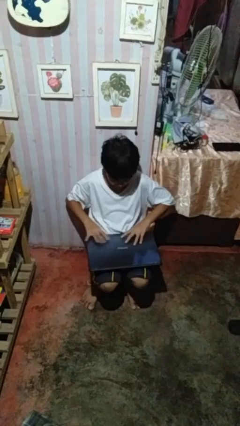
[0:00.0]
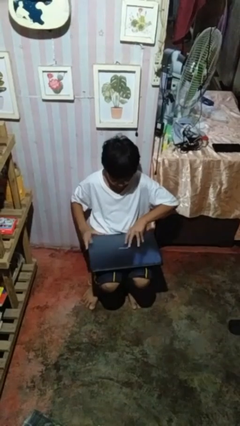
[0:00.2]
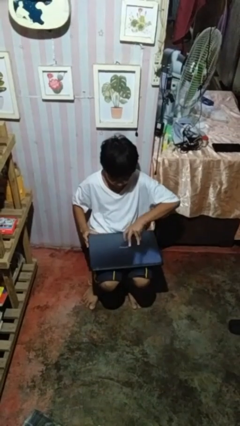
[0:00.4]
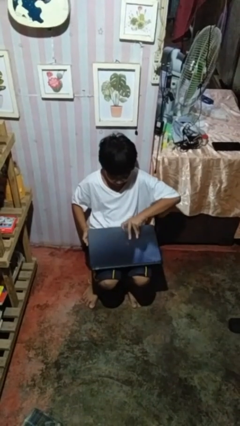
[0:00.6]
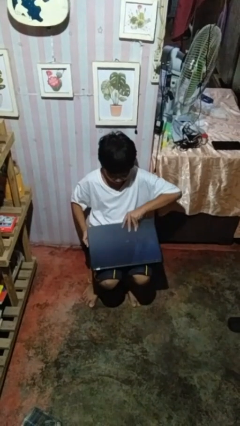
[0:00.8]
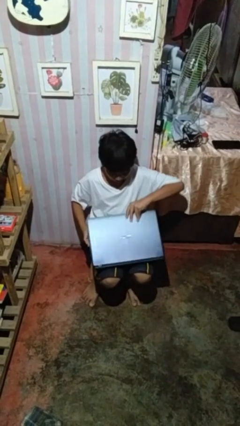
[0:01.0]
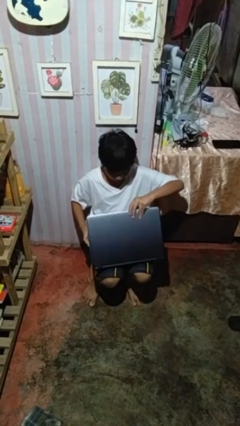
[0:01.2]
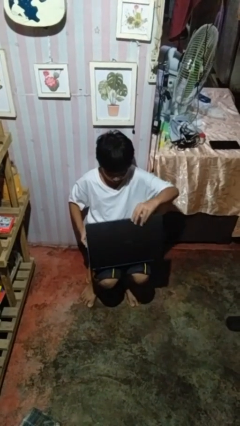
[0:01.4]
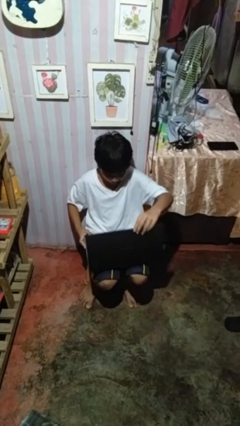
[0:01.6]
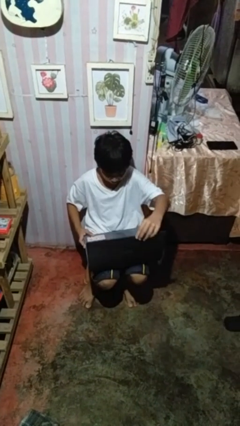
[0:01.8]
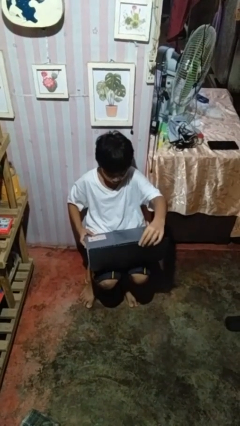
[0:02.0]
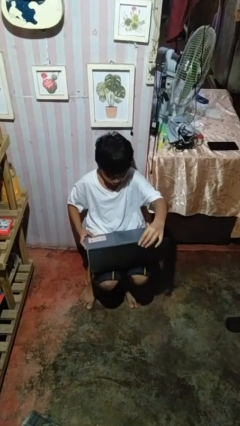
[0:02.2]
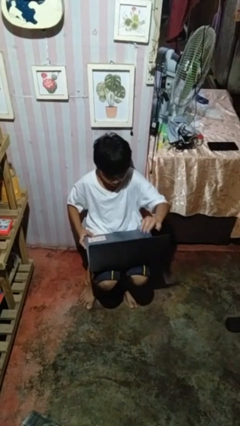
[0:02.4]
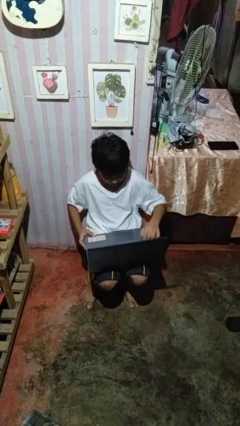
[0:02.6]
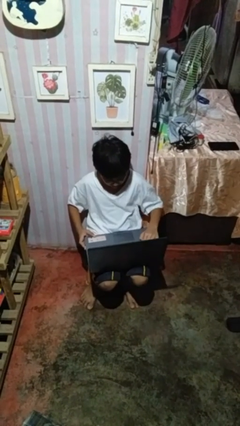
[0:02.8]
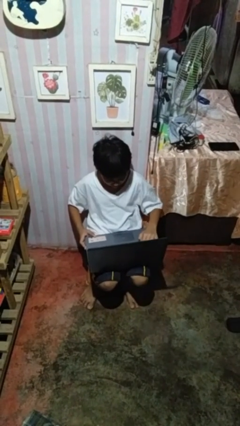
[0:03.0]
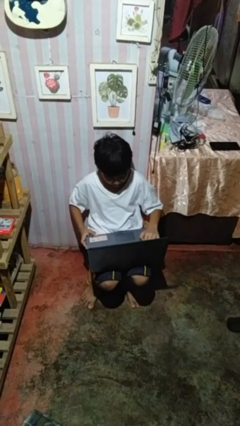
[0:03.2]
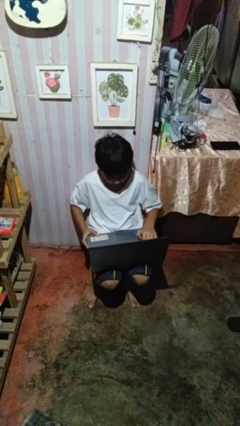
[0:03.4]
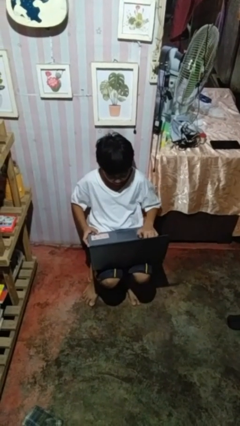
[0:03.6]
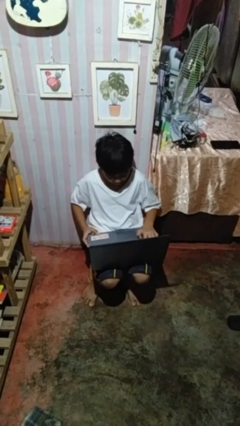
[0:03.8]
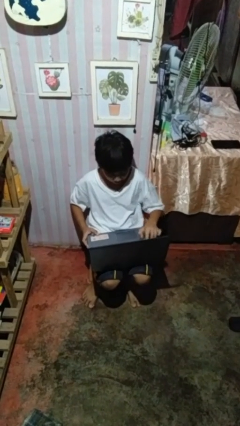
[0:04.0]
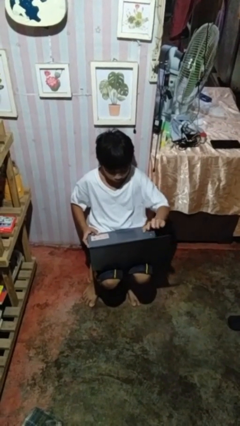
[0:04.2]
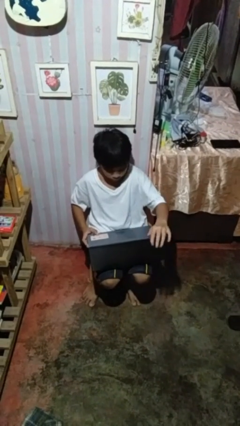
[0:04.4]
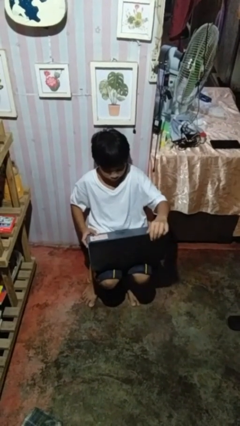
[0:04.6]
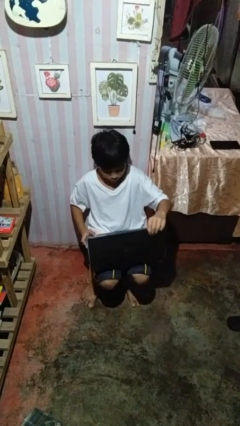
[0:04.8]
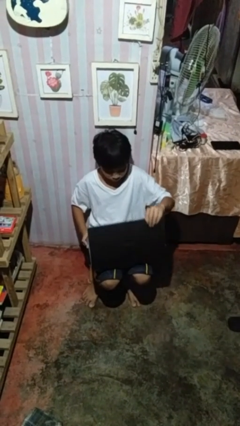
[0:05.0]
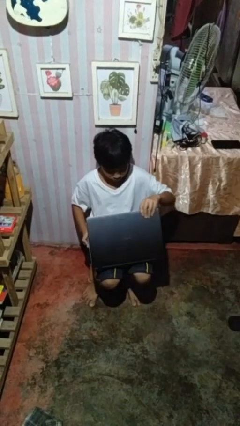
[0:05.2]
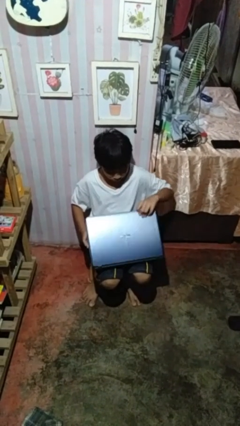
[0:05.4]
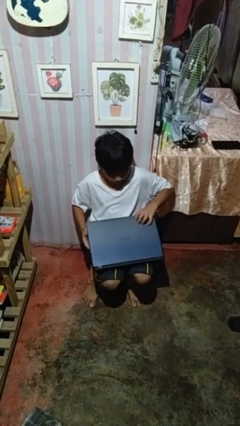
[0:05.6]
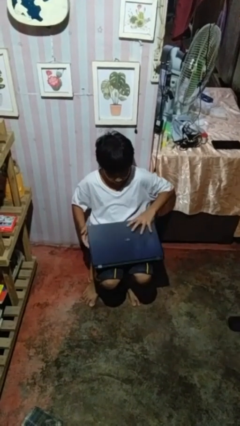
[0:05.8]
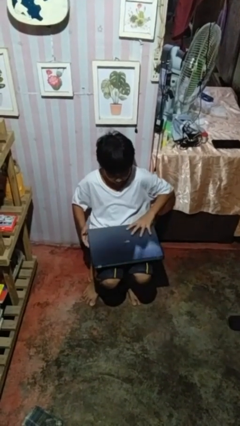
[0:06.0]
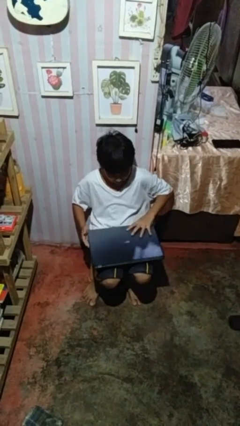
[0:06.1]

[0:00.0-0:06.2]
person interacts with laptop

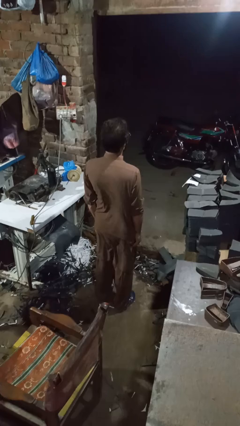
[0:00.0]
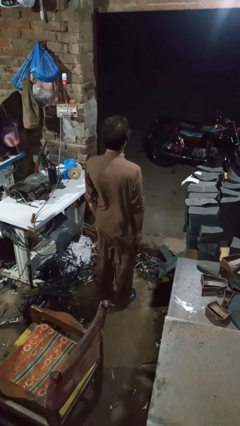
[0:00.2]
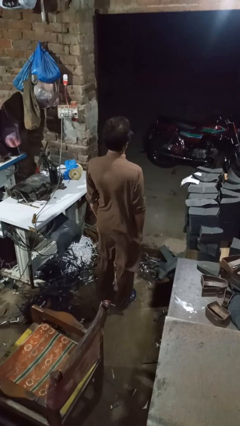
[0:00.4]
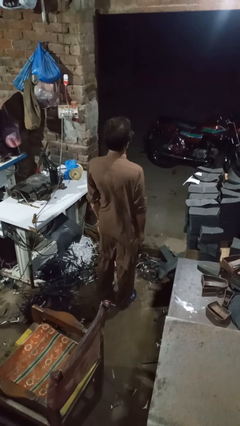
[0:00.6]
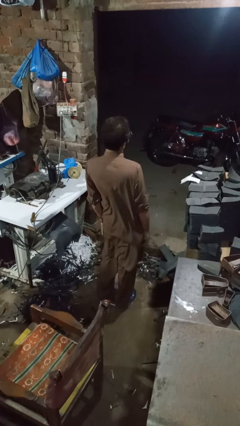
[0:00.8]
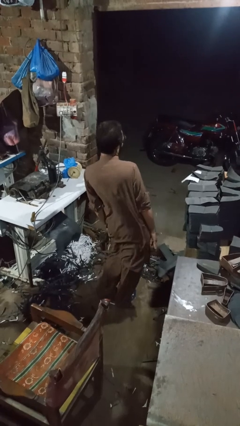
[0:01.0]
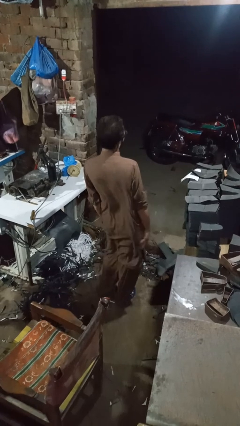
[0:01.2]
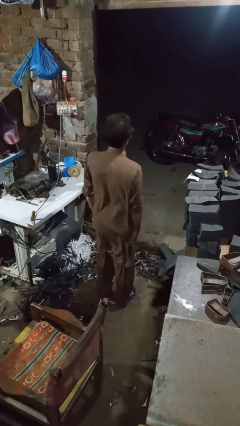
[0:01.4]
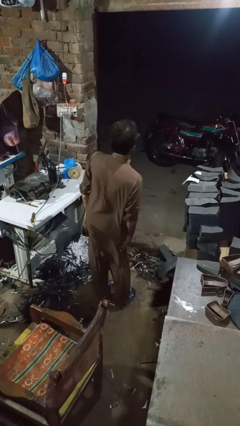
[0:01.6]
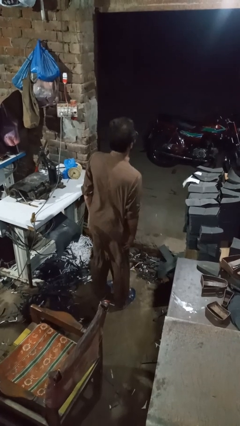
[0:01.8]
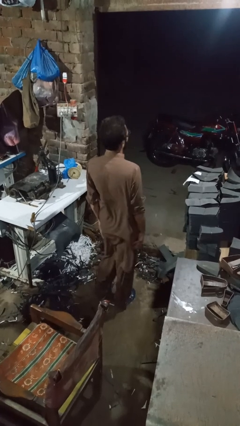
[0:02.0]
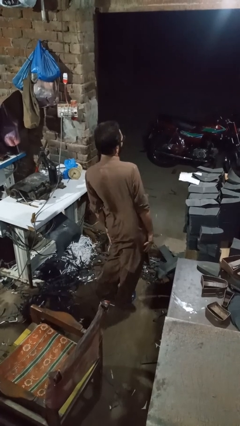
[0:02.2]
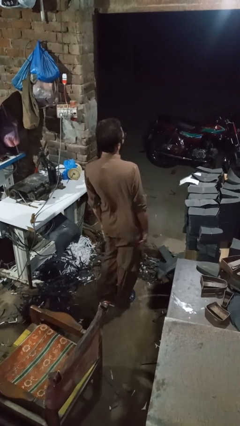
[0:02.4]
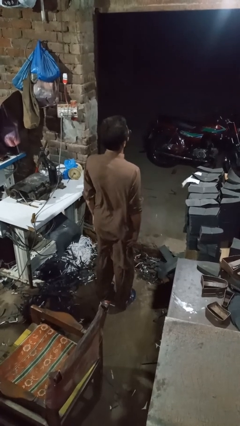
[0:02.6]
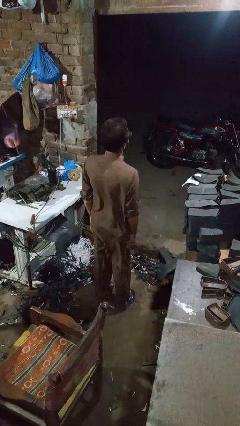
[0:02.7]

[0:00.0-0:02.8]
person wiggles hips

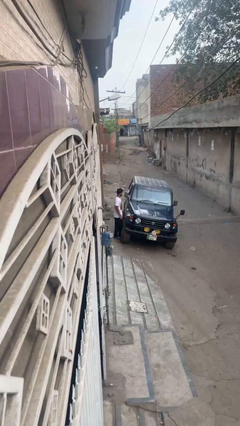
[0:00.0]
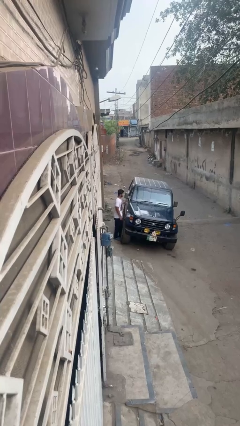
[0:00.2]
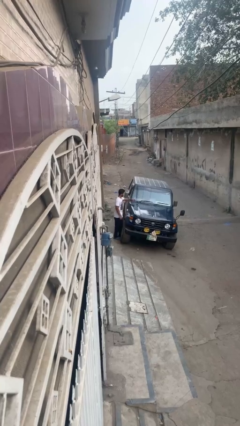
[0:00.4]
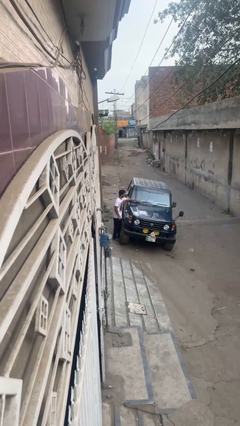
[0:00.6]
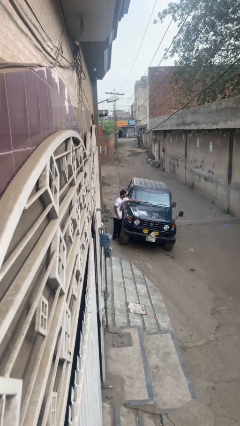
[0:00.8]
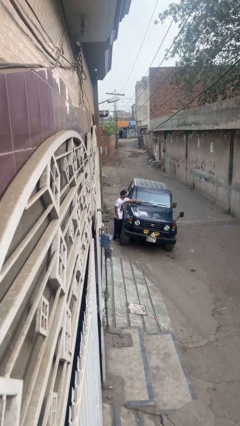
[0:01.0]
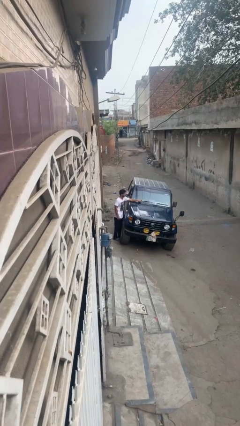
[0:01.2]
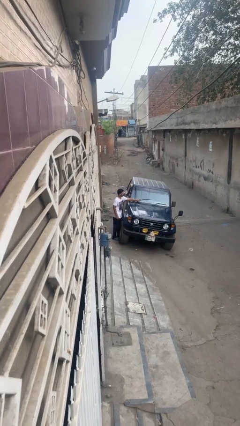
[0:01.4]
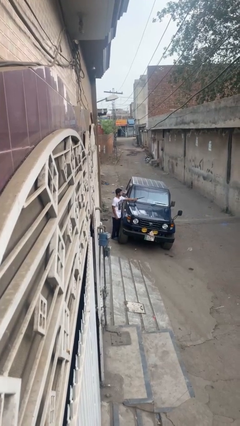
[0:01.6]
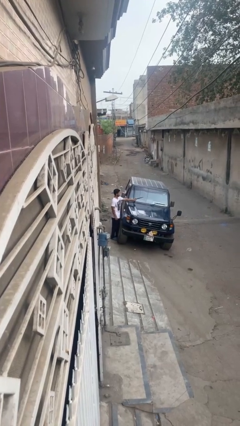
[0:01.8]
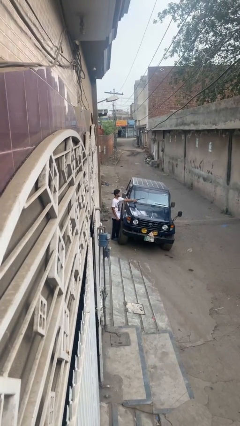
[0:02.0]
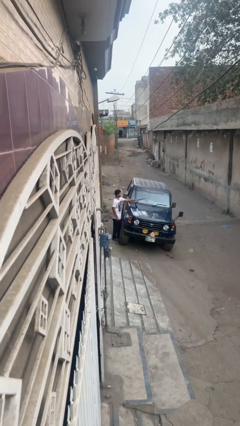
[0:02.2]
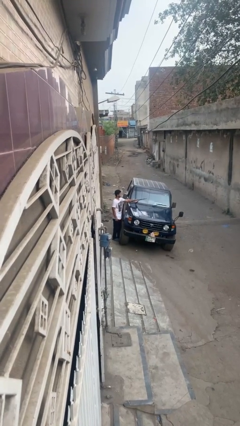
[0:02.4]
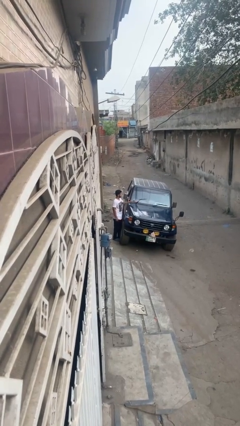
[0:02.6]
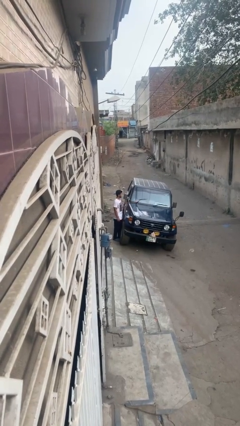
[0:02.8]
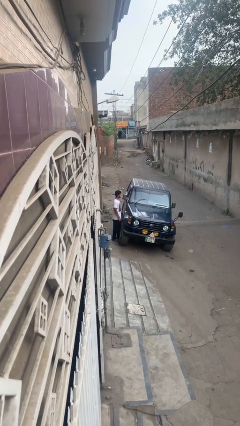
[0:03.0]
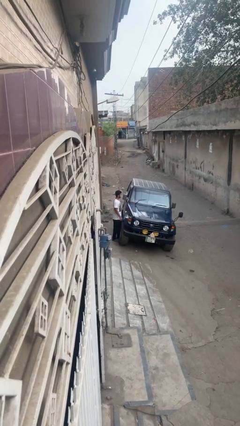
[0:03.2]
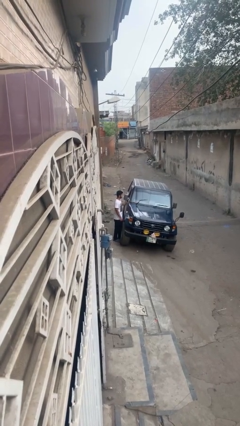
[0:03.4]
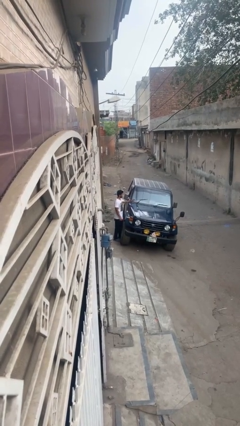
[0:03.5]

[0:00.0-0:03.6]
person flips up car wipers

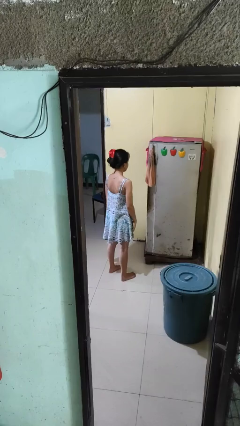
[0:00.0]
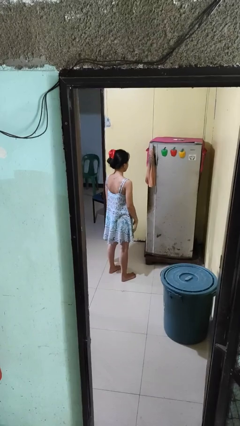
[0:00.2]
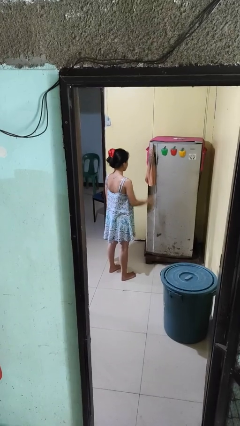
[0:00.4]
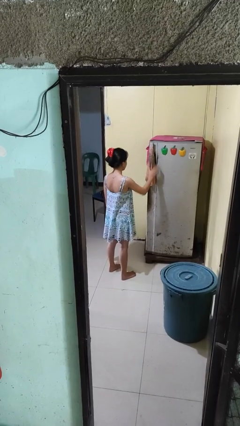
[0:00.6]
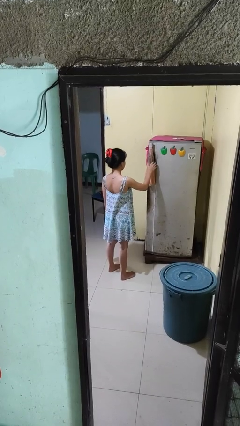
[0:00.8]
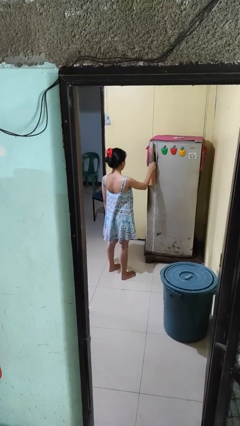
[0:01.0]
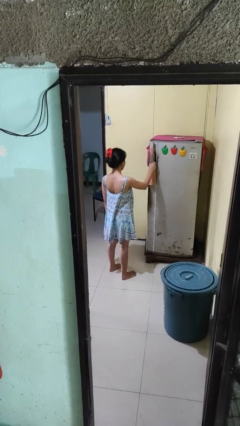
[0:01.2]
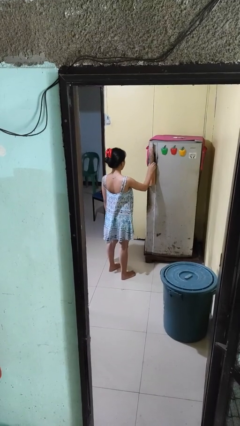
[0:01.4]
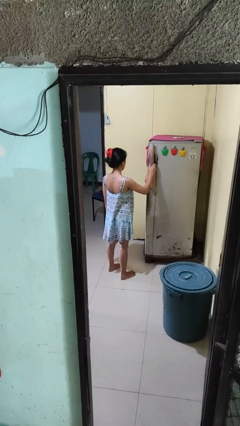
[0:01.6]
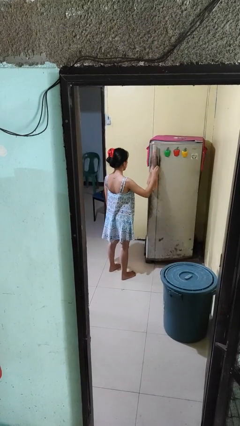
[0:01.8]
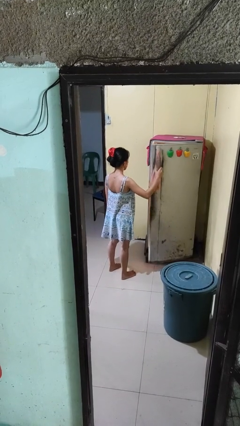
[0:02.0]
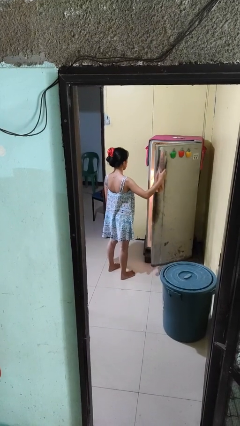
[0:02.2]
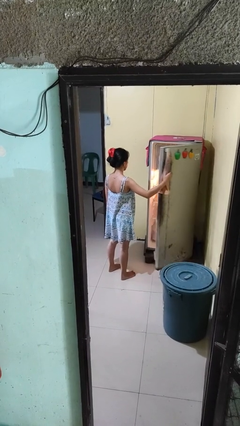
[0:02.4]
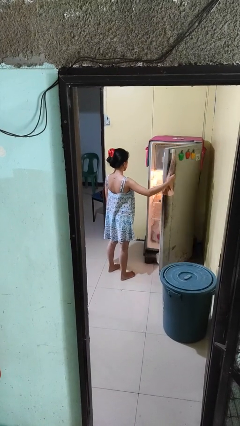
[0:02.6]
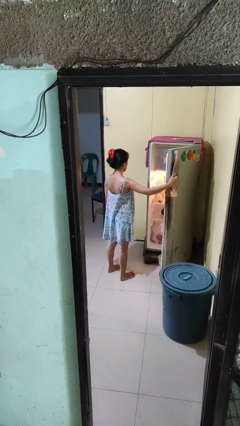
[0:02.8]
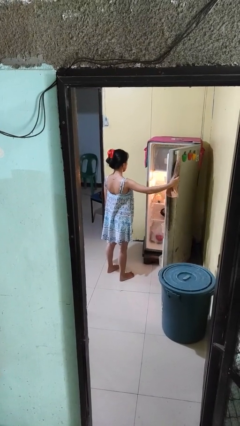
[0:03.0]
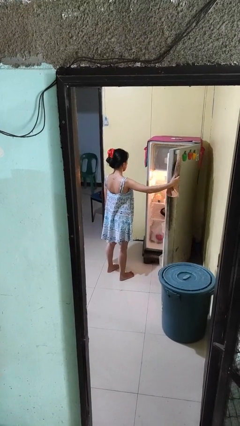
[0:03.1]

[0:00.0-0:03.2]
person opens refrigerator

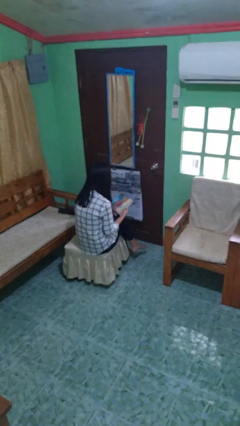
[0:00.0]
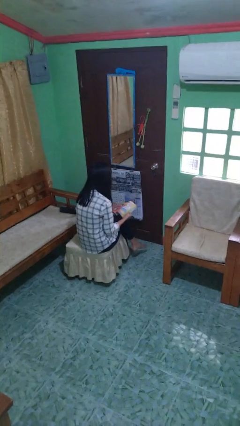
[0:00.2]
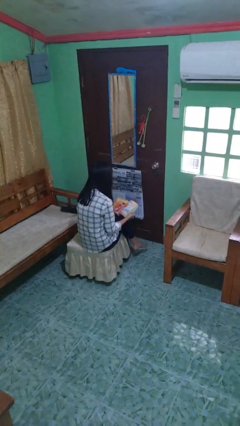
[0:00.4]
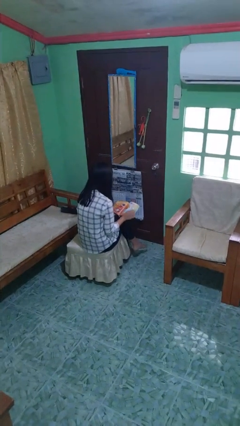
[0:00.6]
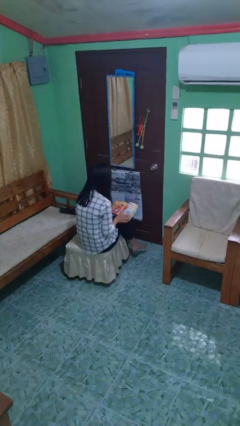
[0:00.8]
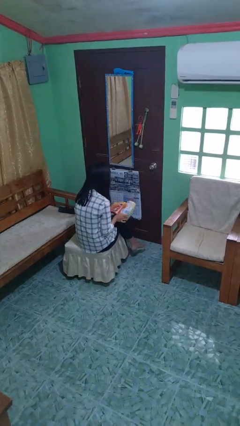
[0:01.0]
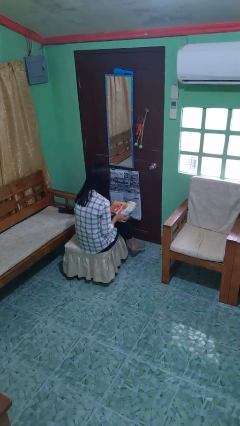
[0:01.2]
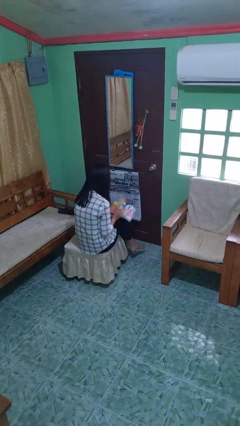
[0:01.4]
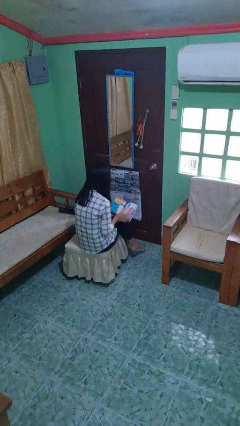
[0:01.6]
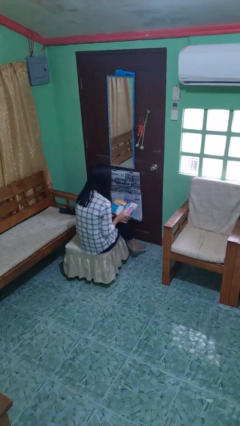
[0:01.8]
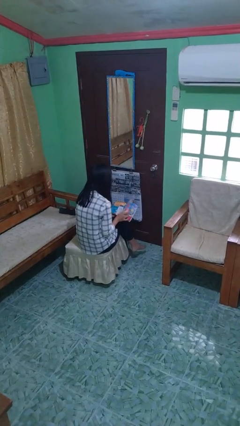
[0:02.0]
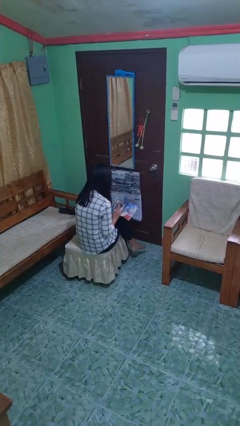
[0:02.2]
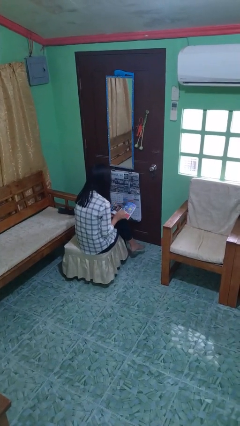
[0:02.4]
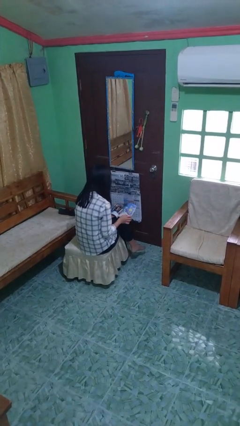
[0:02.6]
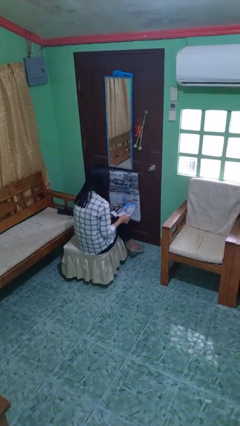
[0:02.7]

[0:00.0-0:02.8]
person reads magazine
